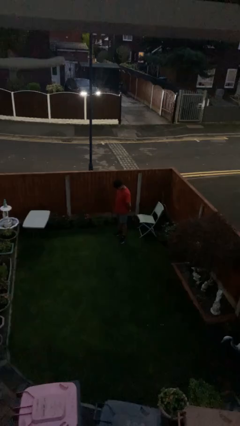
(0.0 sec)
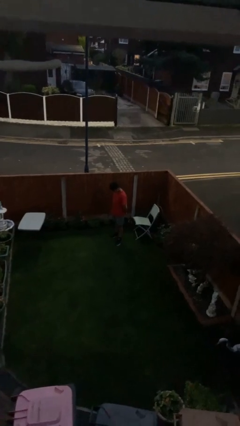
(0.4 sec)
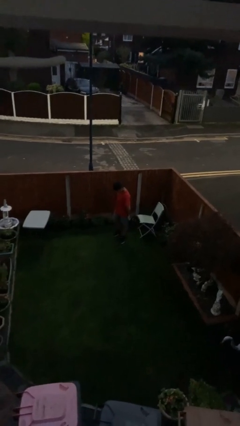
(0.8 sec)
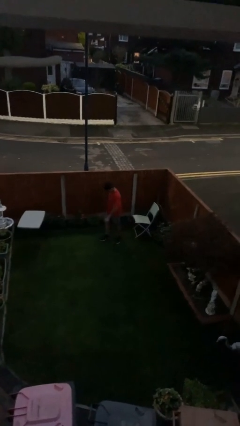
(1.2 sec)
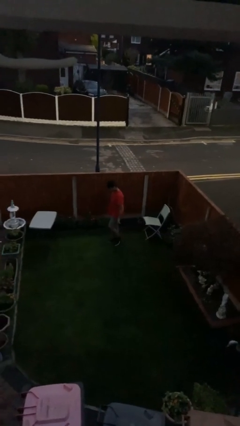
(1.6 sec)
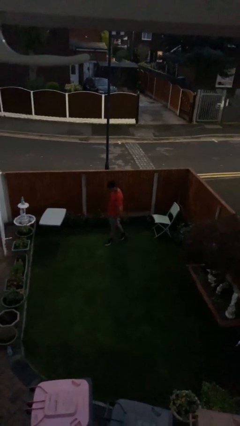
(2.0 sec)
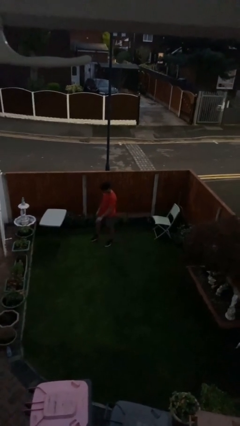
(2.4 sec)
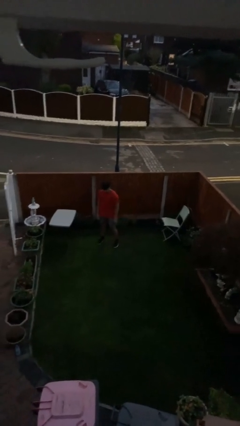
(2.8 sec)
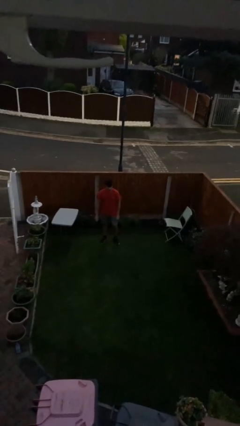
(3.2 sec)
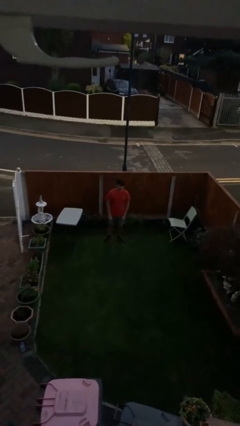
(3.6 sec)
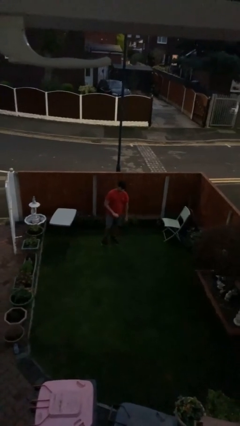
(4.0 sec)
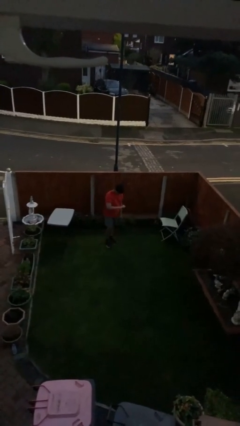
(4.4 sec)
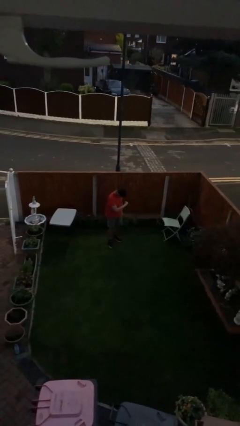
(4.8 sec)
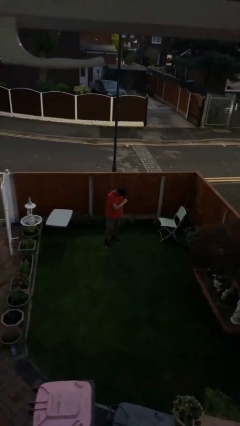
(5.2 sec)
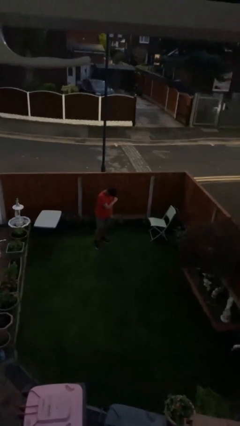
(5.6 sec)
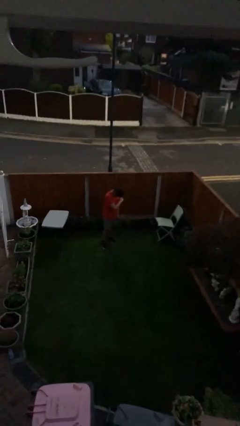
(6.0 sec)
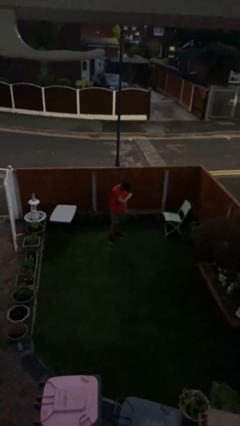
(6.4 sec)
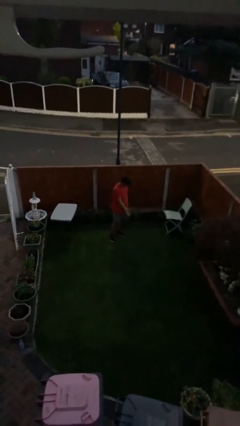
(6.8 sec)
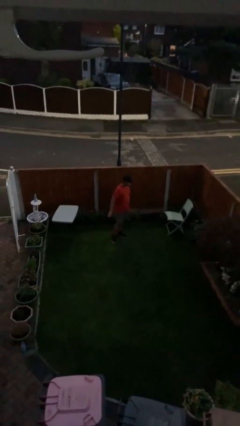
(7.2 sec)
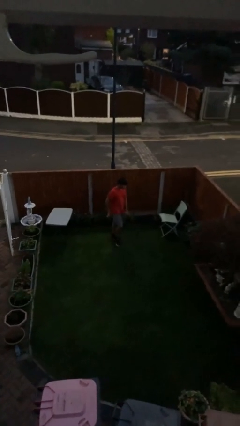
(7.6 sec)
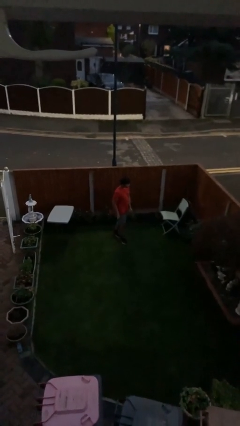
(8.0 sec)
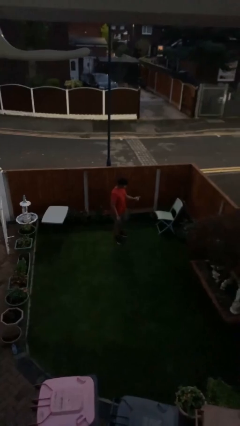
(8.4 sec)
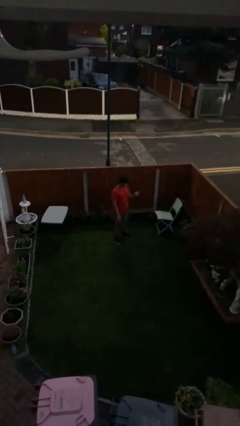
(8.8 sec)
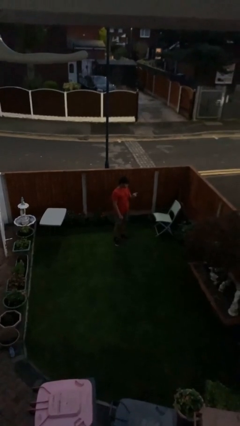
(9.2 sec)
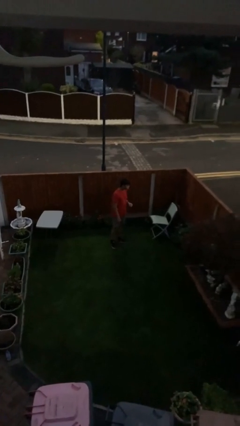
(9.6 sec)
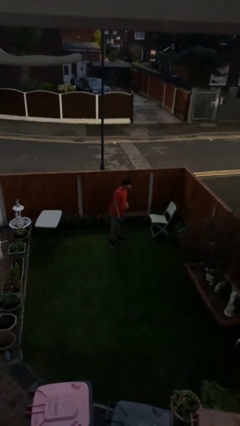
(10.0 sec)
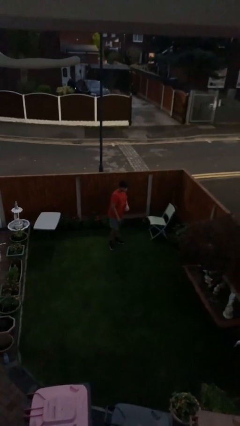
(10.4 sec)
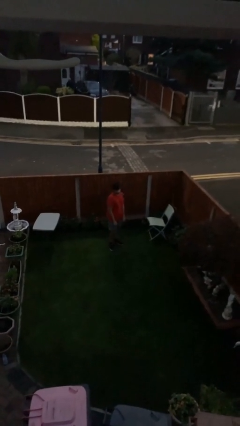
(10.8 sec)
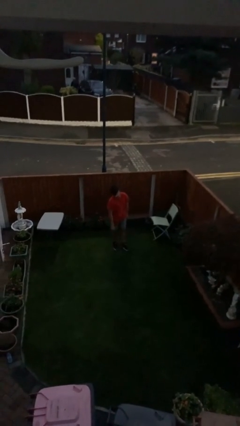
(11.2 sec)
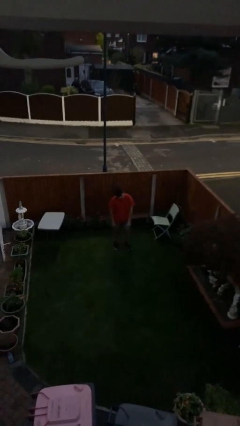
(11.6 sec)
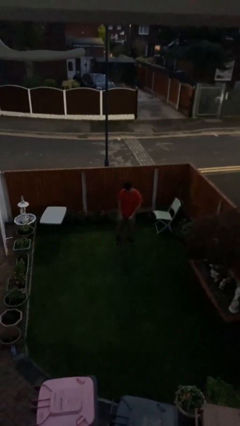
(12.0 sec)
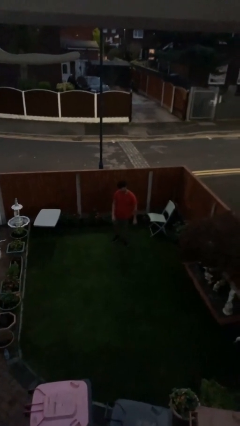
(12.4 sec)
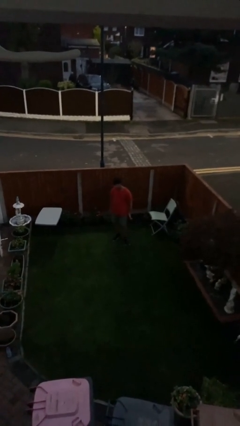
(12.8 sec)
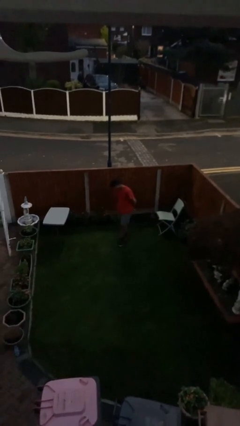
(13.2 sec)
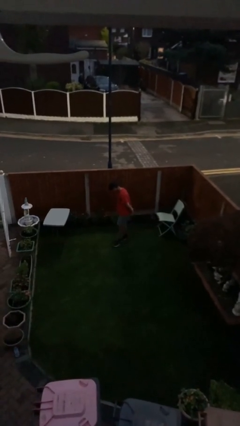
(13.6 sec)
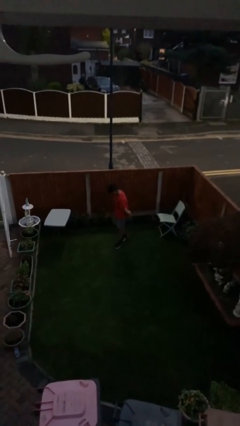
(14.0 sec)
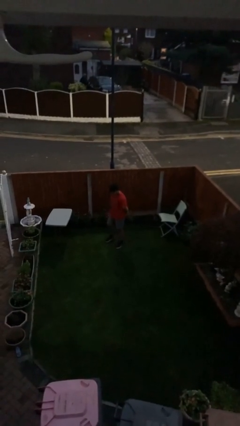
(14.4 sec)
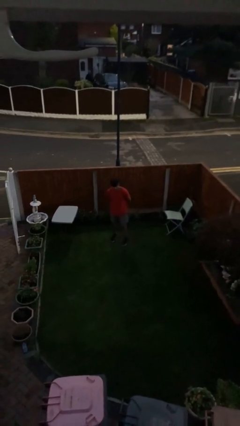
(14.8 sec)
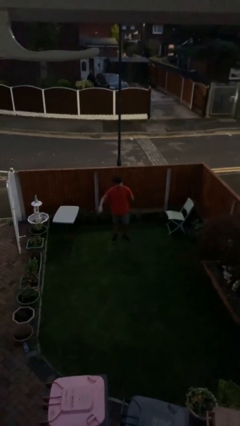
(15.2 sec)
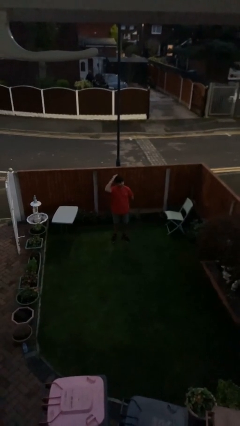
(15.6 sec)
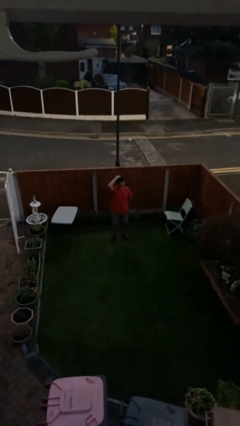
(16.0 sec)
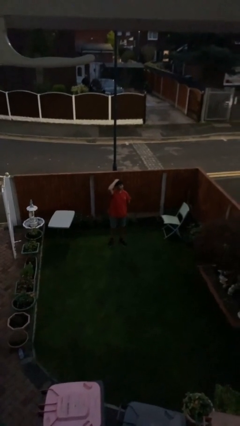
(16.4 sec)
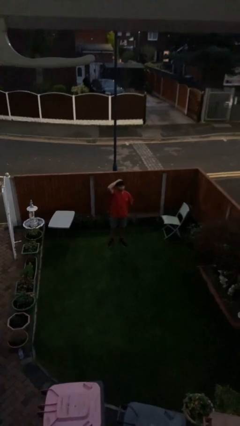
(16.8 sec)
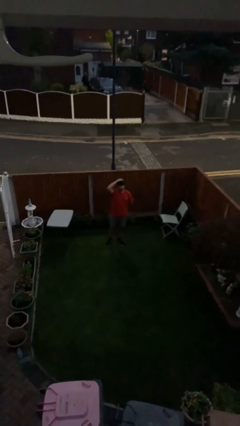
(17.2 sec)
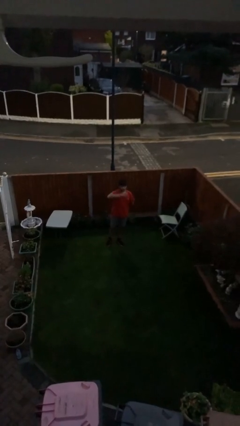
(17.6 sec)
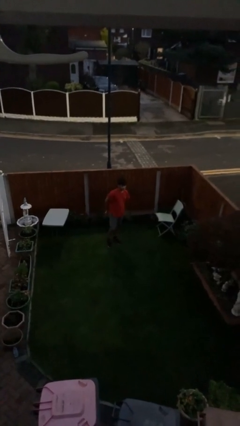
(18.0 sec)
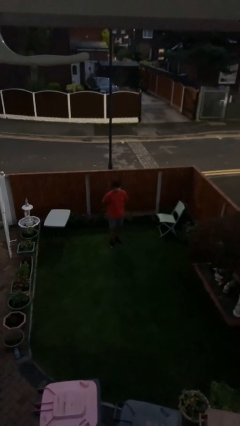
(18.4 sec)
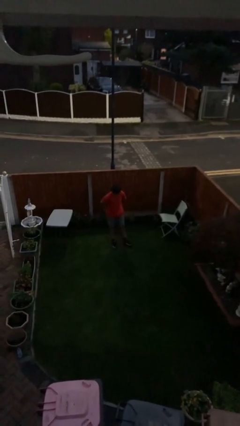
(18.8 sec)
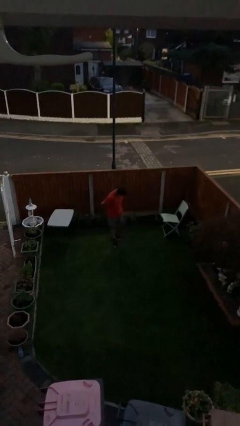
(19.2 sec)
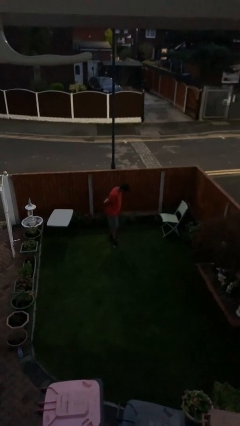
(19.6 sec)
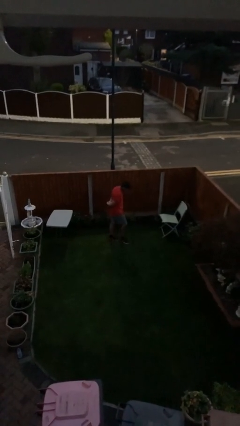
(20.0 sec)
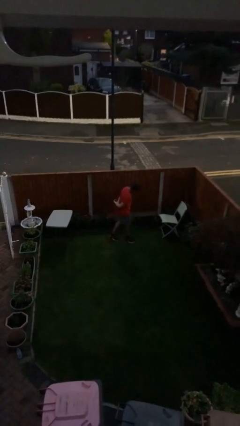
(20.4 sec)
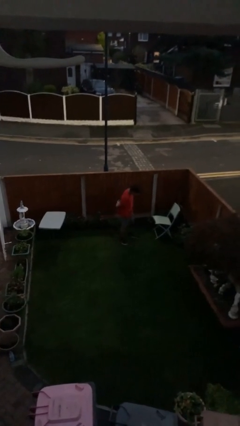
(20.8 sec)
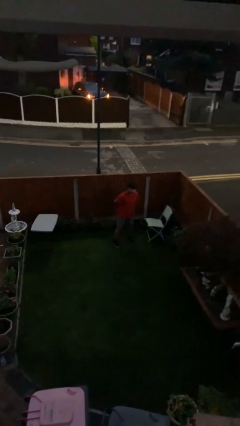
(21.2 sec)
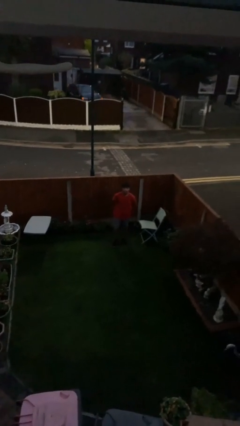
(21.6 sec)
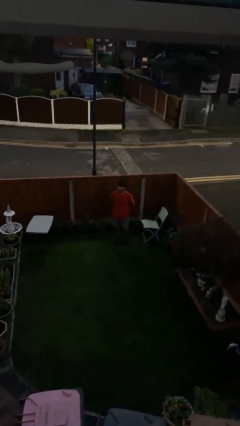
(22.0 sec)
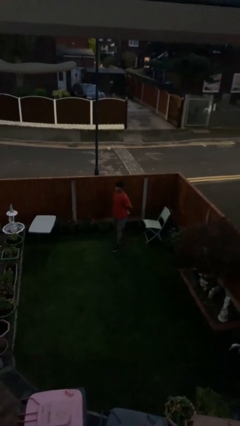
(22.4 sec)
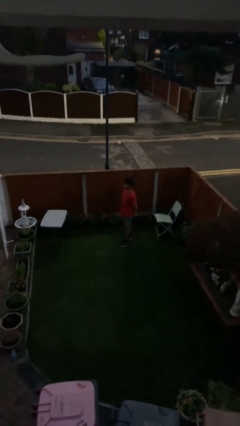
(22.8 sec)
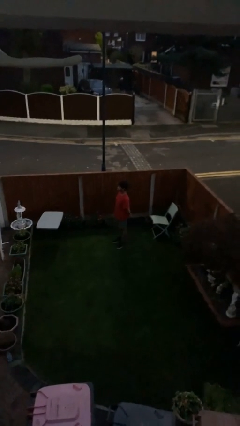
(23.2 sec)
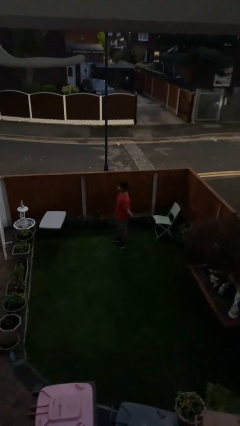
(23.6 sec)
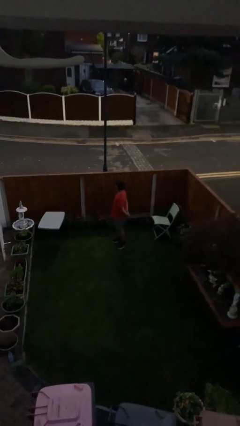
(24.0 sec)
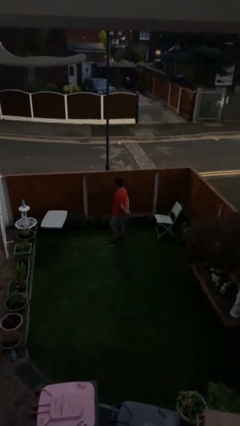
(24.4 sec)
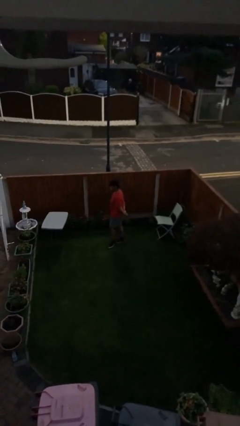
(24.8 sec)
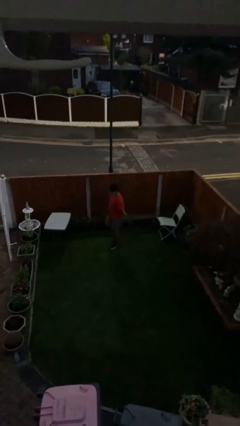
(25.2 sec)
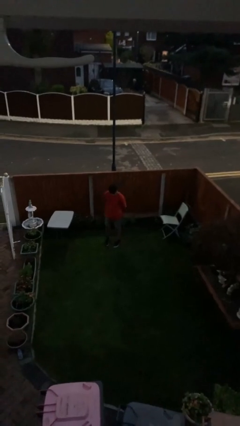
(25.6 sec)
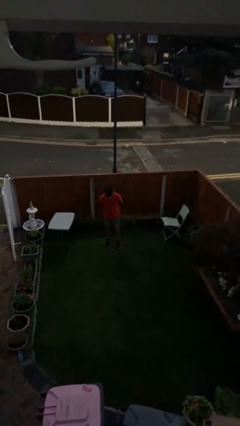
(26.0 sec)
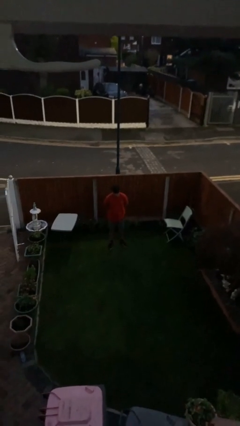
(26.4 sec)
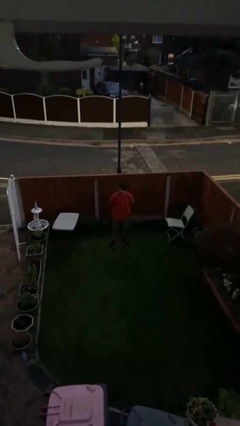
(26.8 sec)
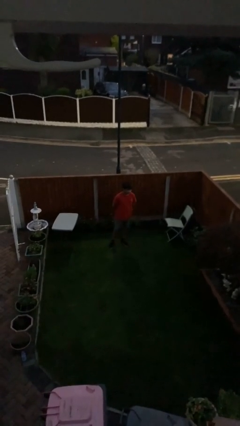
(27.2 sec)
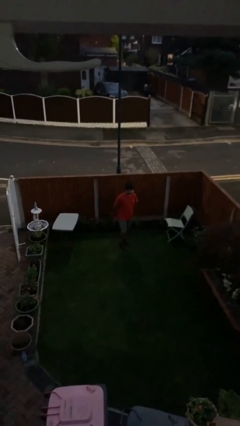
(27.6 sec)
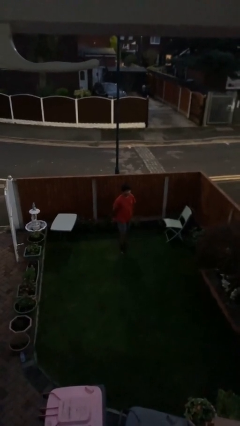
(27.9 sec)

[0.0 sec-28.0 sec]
person walks

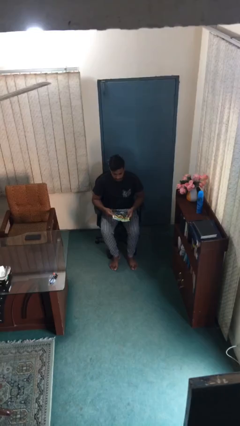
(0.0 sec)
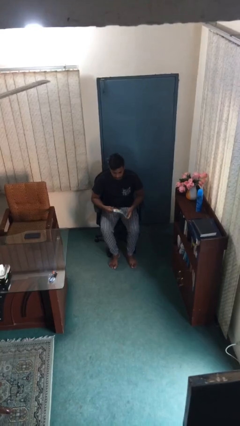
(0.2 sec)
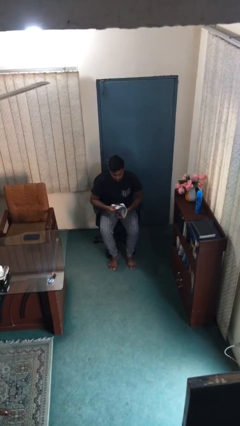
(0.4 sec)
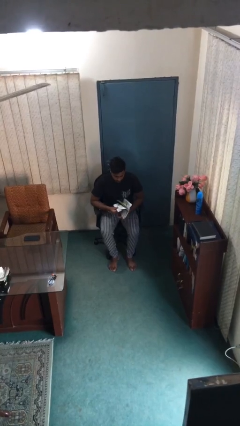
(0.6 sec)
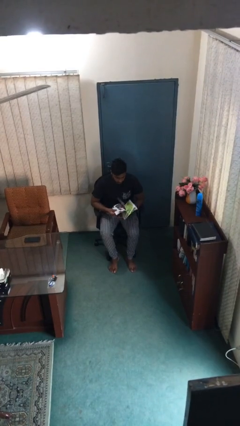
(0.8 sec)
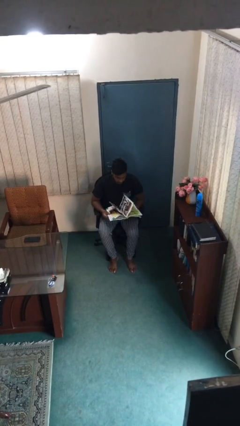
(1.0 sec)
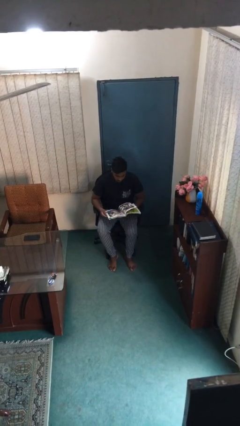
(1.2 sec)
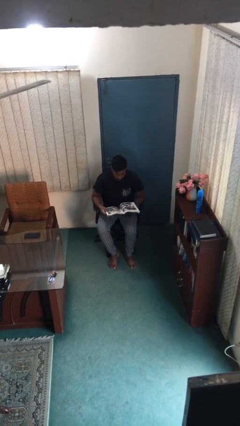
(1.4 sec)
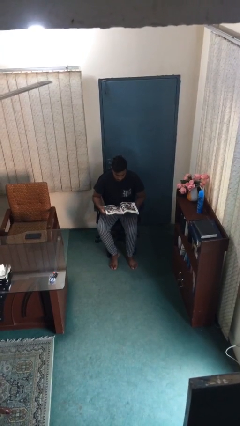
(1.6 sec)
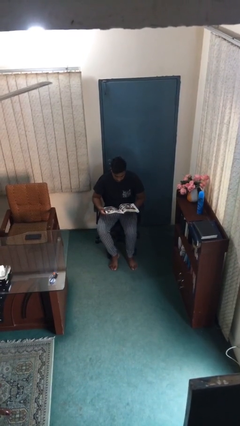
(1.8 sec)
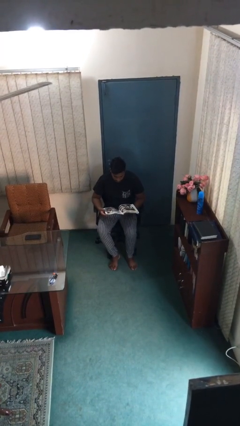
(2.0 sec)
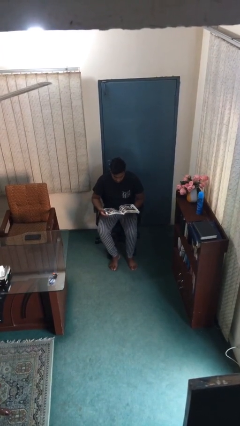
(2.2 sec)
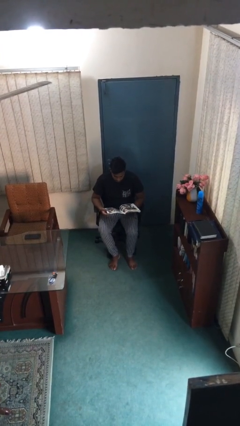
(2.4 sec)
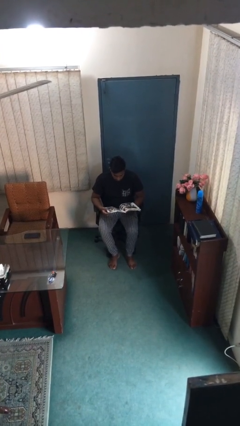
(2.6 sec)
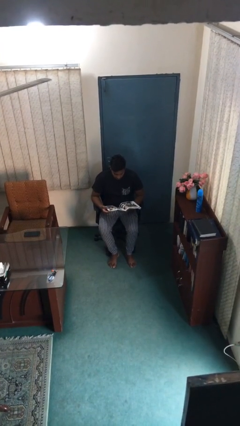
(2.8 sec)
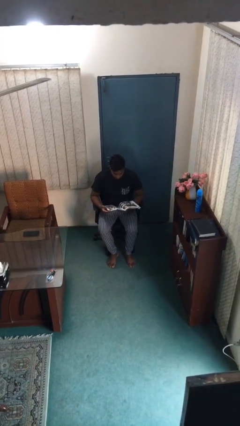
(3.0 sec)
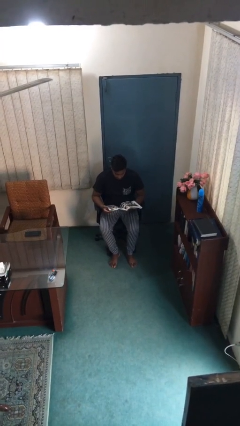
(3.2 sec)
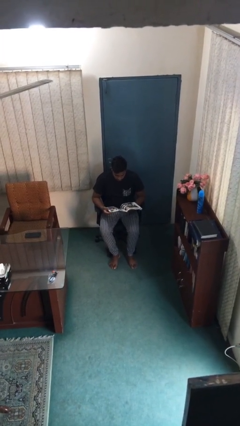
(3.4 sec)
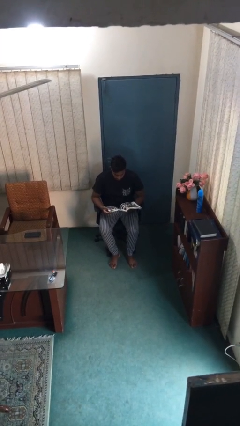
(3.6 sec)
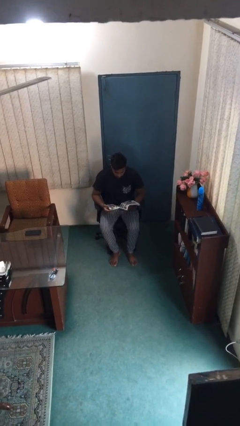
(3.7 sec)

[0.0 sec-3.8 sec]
person reads document

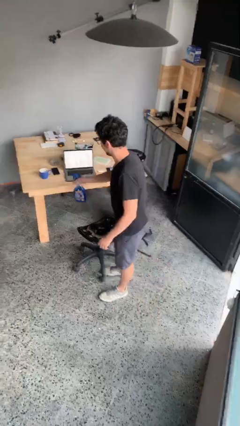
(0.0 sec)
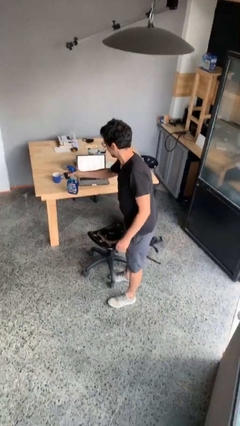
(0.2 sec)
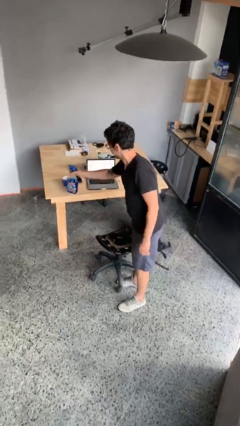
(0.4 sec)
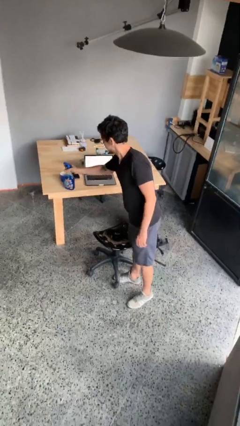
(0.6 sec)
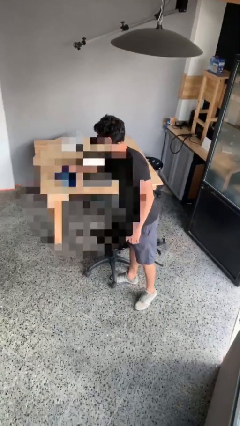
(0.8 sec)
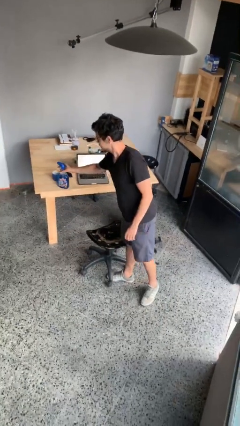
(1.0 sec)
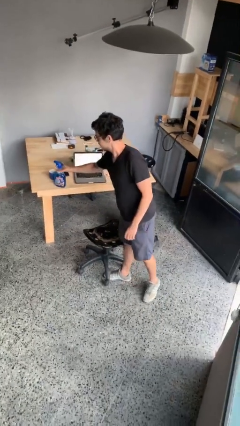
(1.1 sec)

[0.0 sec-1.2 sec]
person puts down object on table
